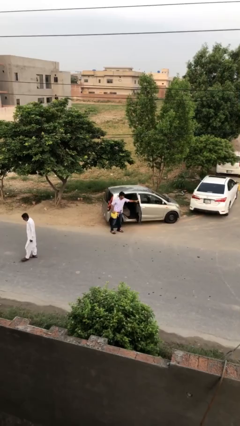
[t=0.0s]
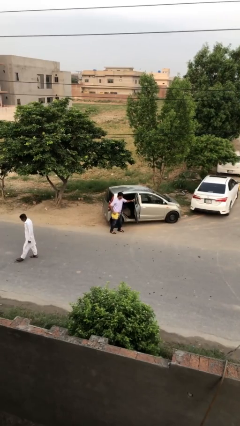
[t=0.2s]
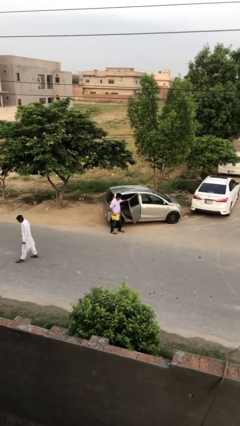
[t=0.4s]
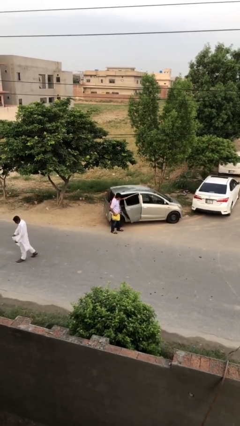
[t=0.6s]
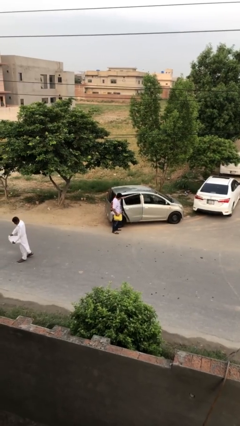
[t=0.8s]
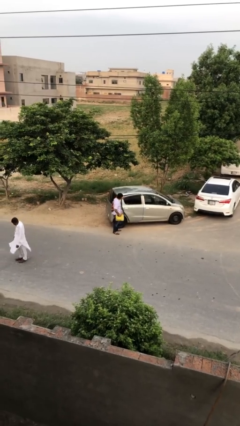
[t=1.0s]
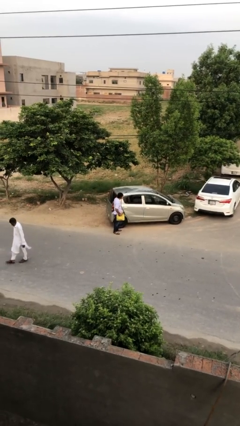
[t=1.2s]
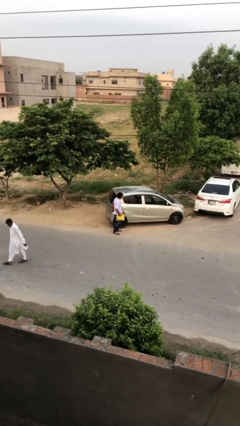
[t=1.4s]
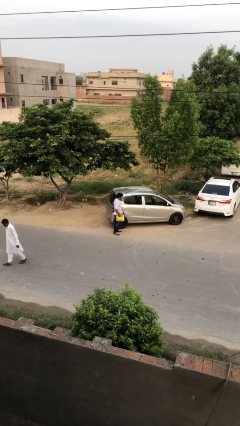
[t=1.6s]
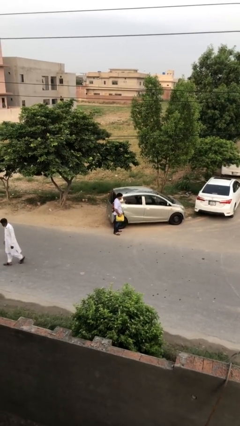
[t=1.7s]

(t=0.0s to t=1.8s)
person closes car door

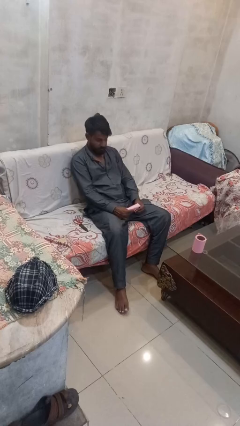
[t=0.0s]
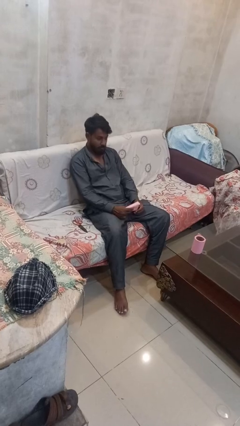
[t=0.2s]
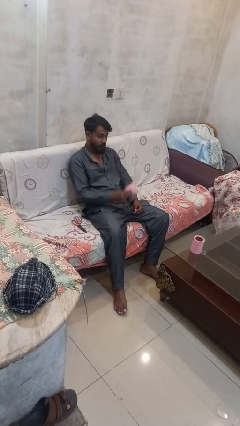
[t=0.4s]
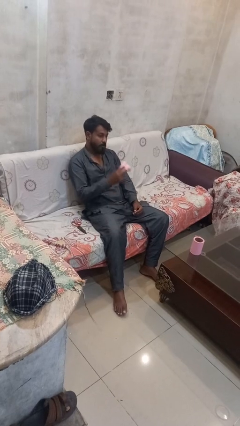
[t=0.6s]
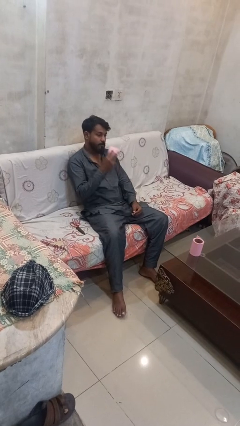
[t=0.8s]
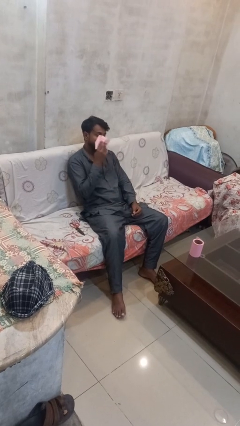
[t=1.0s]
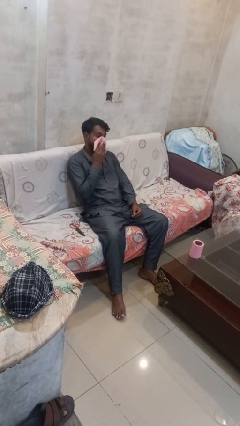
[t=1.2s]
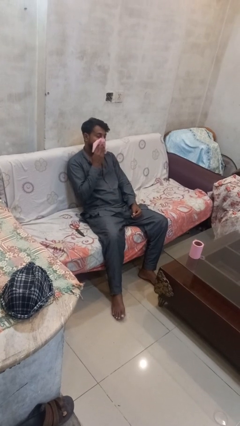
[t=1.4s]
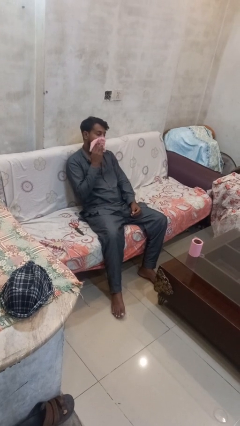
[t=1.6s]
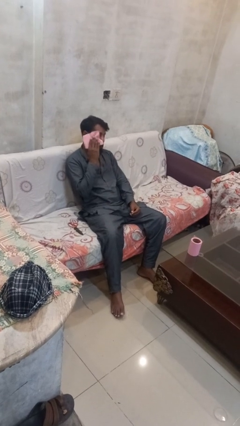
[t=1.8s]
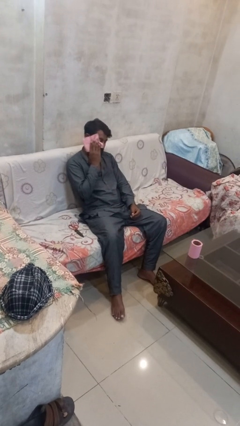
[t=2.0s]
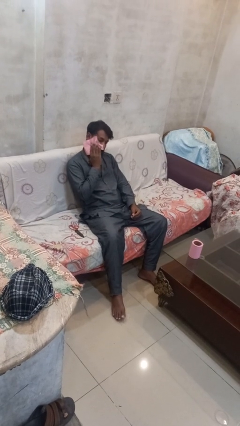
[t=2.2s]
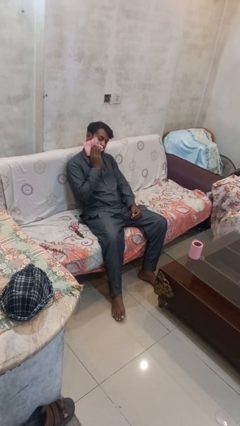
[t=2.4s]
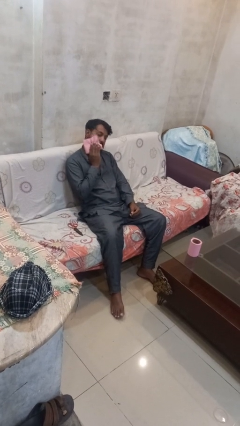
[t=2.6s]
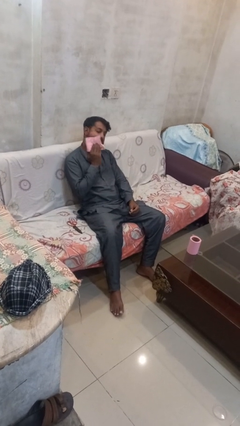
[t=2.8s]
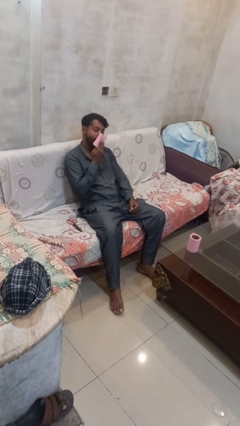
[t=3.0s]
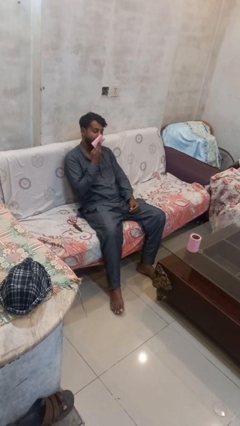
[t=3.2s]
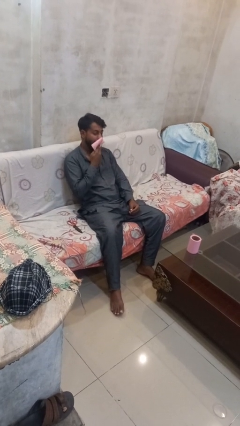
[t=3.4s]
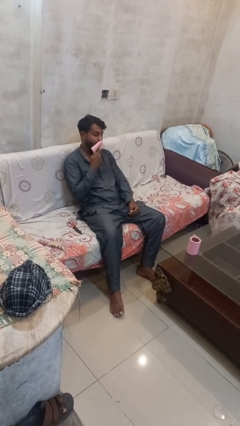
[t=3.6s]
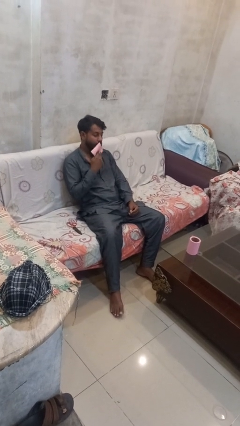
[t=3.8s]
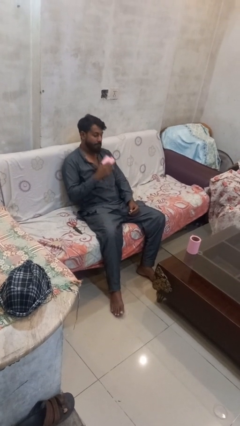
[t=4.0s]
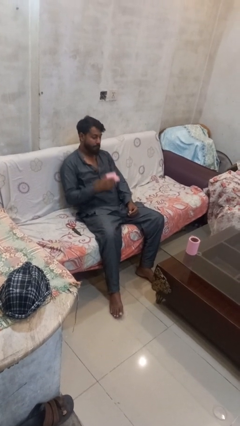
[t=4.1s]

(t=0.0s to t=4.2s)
person wipes mouth with napkin

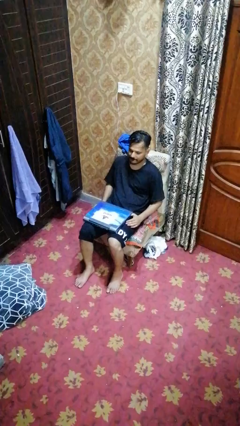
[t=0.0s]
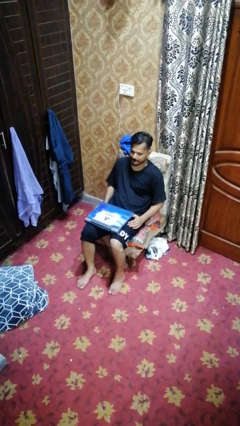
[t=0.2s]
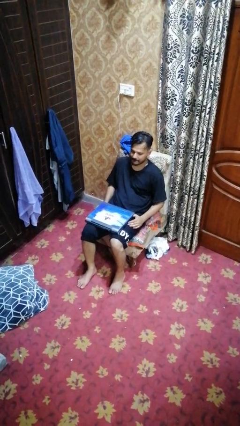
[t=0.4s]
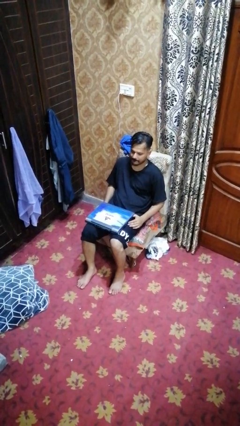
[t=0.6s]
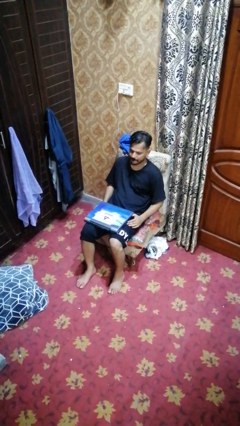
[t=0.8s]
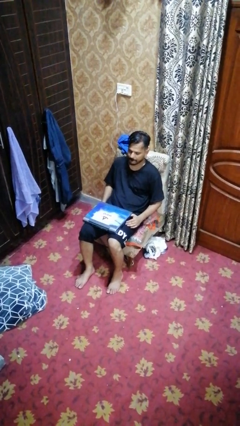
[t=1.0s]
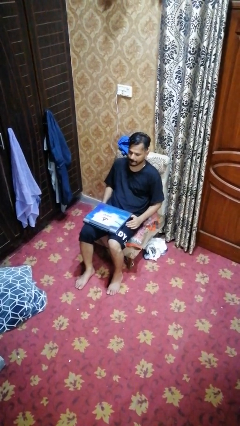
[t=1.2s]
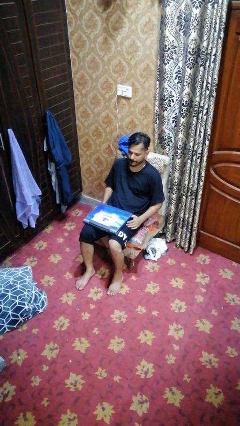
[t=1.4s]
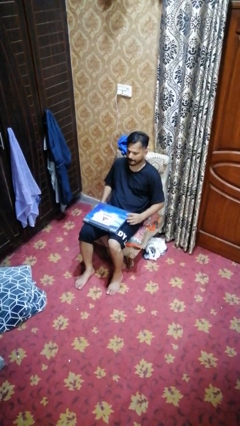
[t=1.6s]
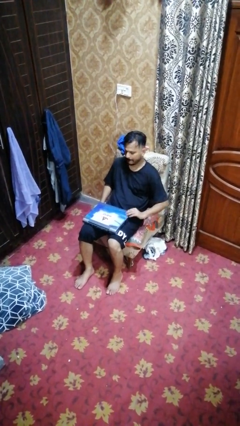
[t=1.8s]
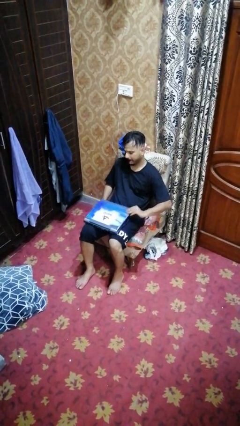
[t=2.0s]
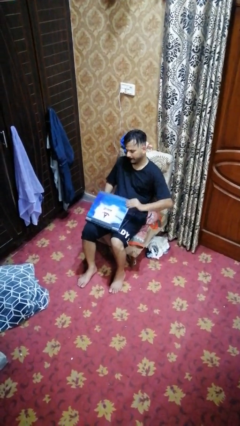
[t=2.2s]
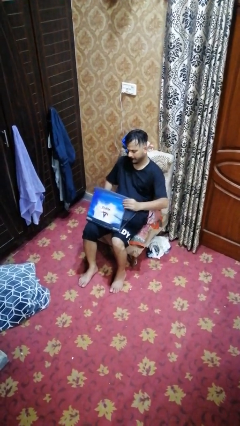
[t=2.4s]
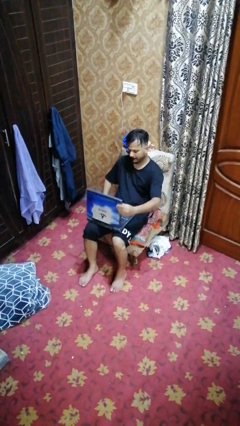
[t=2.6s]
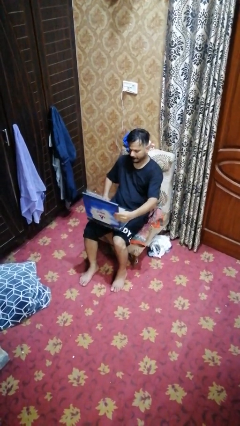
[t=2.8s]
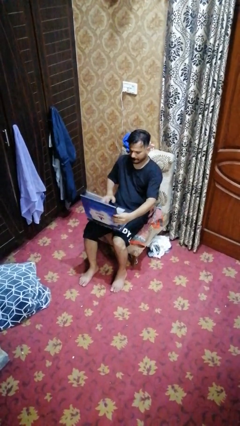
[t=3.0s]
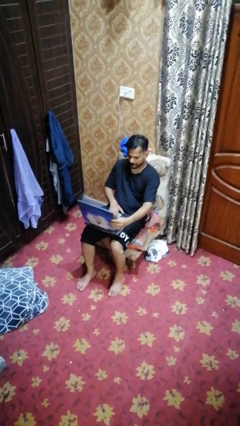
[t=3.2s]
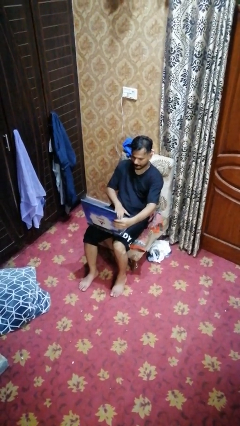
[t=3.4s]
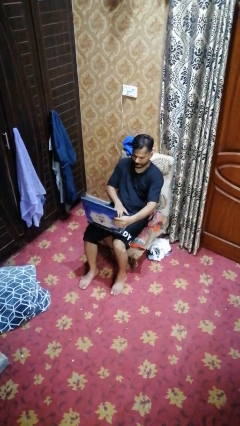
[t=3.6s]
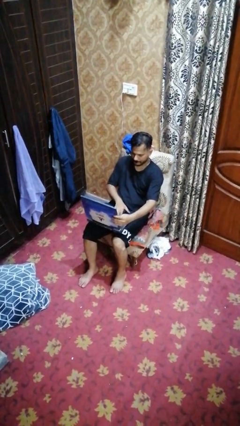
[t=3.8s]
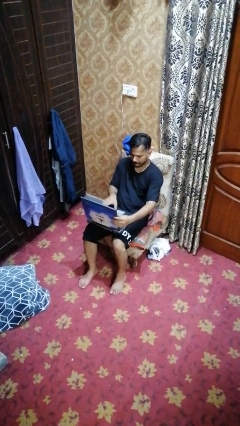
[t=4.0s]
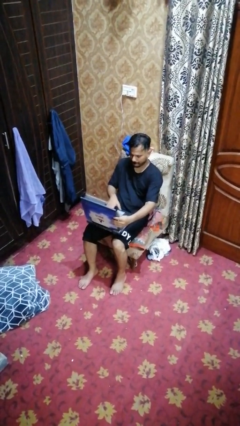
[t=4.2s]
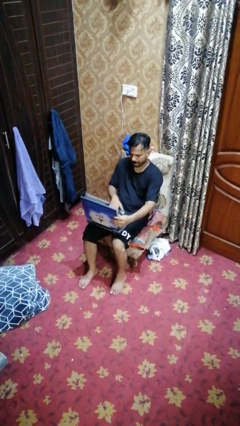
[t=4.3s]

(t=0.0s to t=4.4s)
person opens laptop

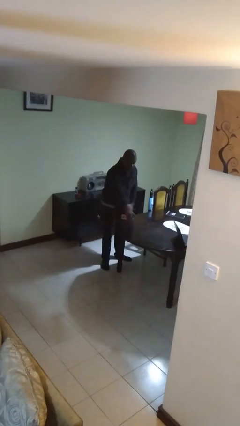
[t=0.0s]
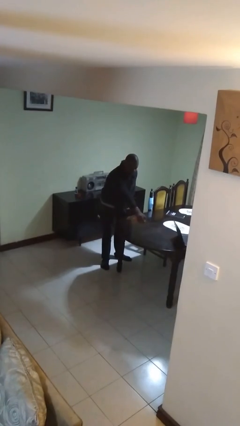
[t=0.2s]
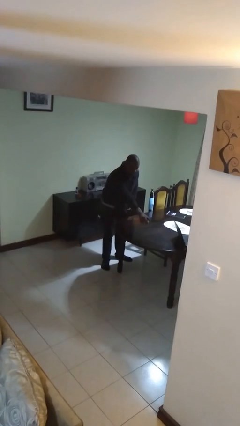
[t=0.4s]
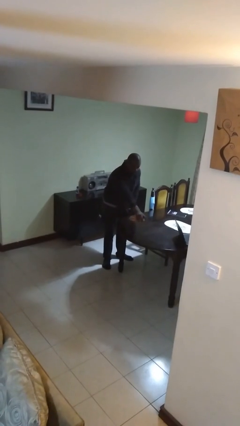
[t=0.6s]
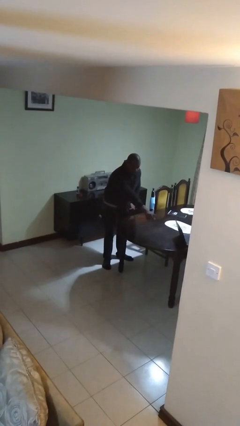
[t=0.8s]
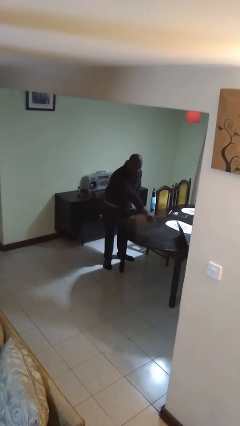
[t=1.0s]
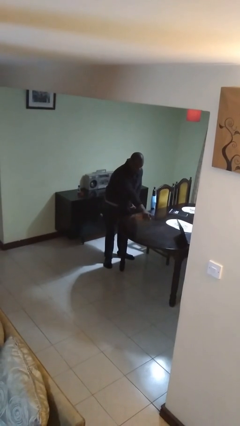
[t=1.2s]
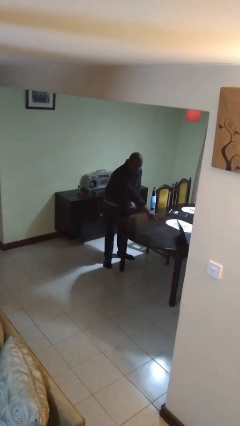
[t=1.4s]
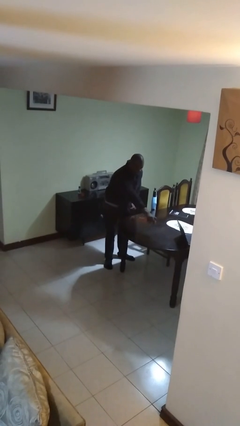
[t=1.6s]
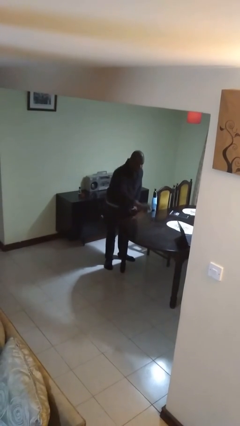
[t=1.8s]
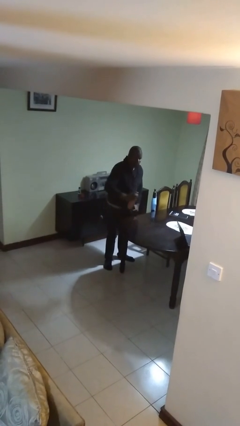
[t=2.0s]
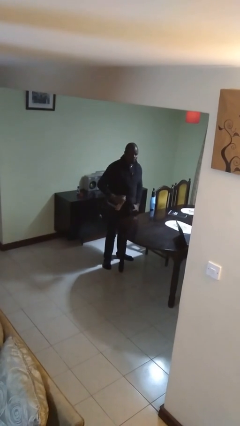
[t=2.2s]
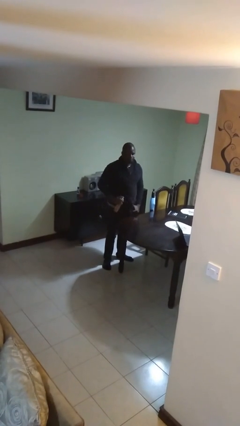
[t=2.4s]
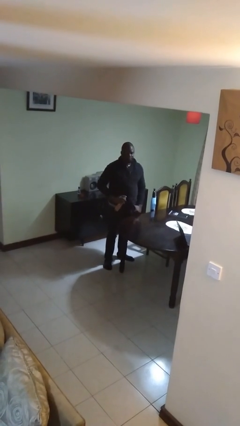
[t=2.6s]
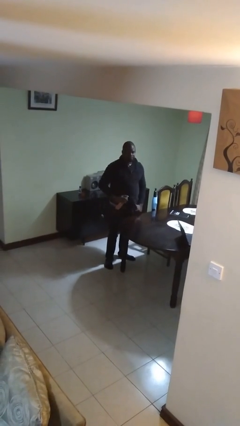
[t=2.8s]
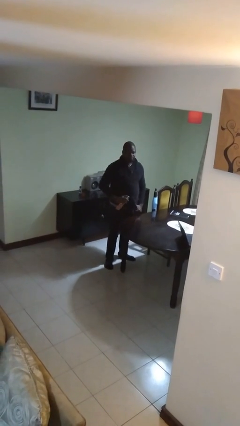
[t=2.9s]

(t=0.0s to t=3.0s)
person sprays from bottle

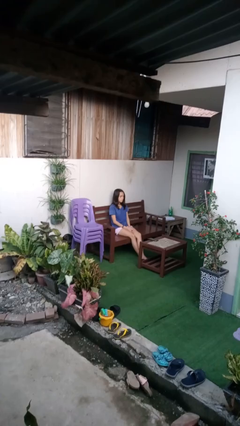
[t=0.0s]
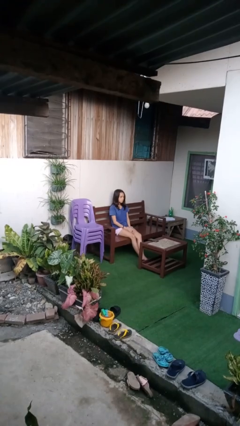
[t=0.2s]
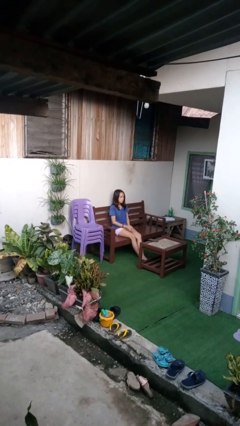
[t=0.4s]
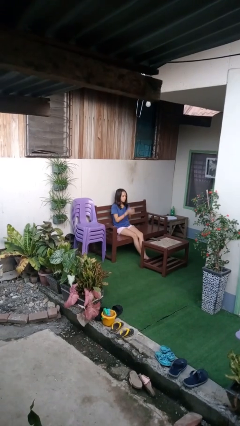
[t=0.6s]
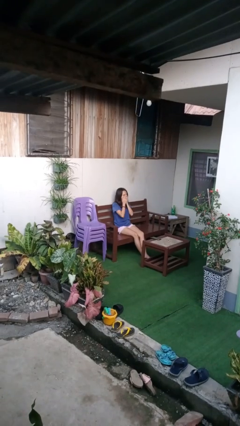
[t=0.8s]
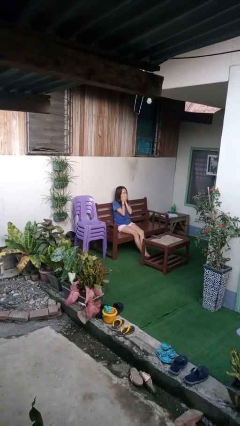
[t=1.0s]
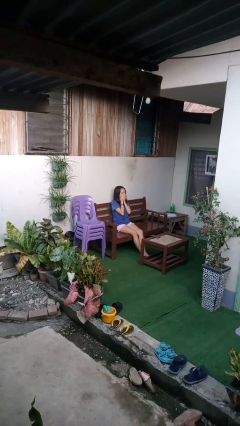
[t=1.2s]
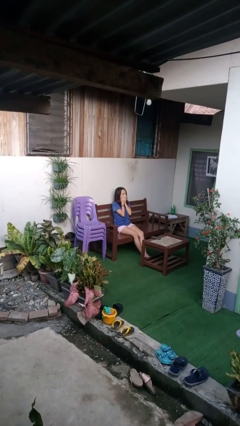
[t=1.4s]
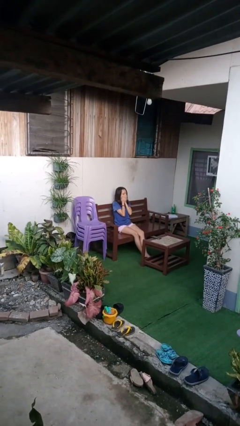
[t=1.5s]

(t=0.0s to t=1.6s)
person yawns

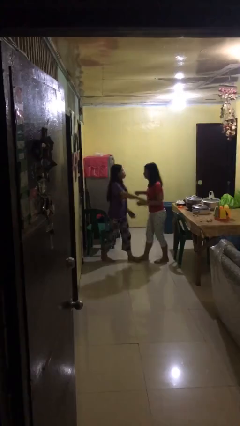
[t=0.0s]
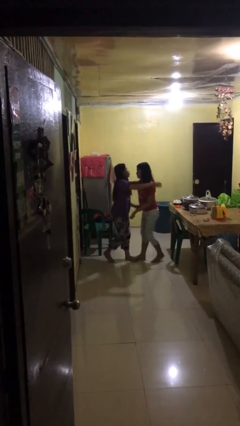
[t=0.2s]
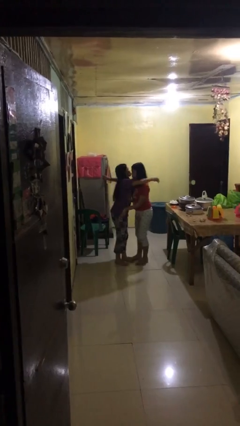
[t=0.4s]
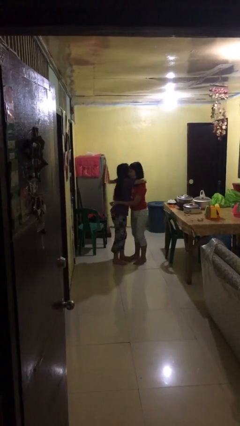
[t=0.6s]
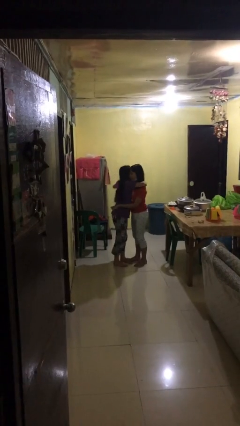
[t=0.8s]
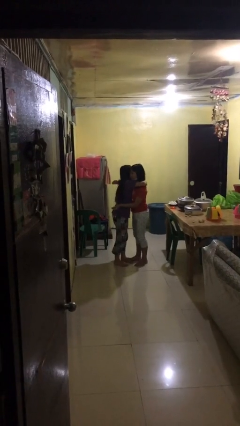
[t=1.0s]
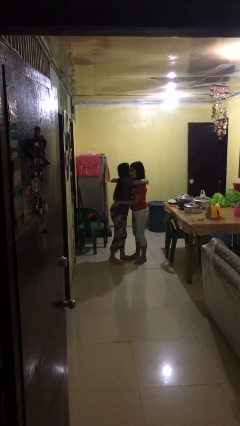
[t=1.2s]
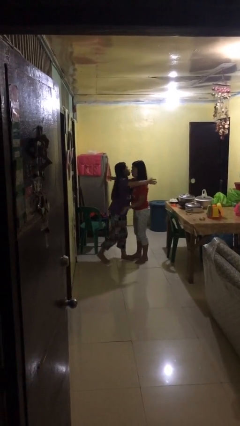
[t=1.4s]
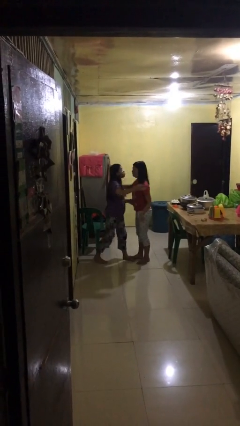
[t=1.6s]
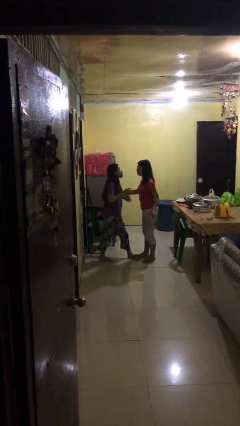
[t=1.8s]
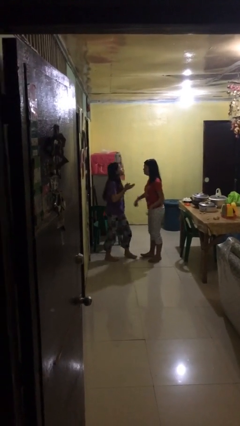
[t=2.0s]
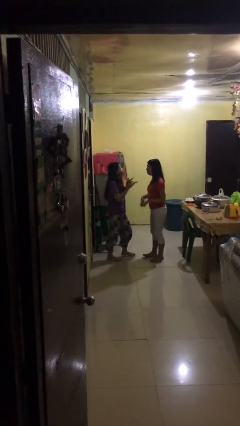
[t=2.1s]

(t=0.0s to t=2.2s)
person embraces person
